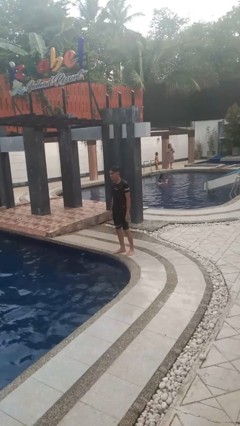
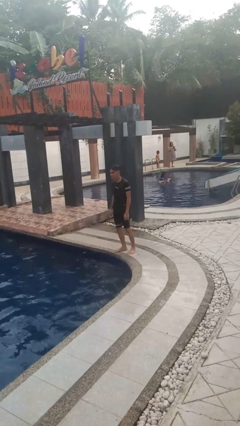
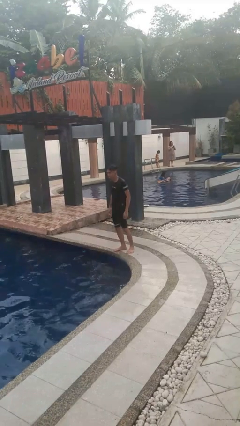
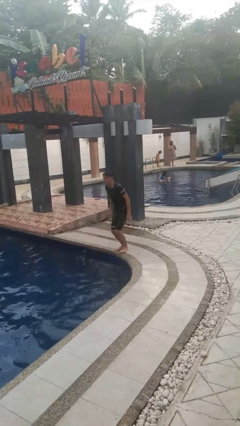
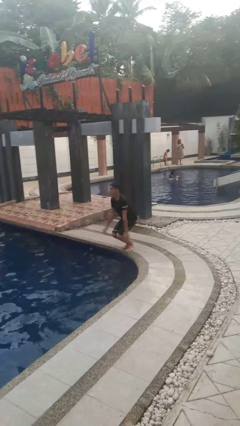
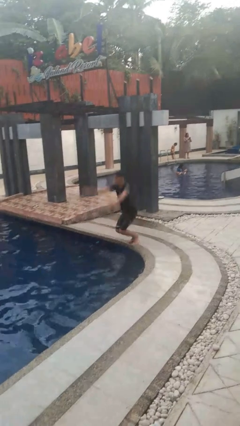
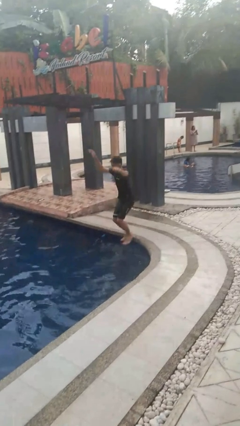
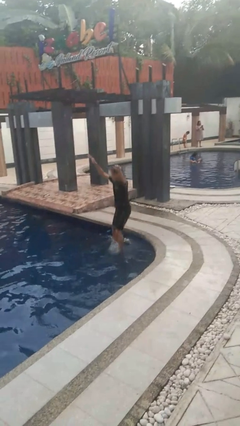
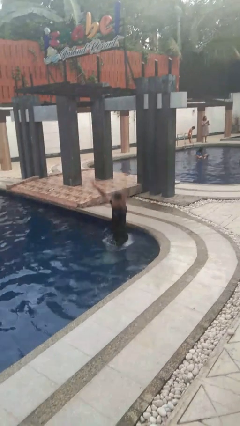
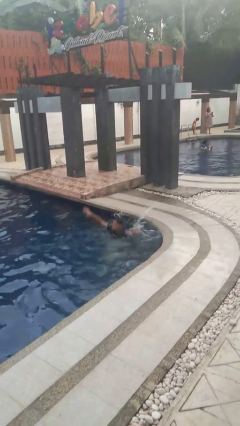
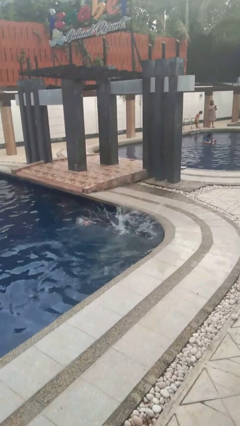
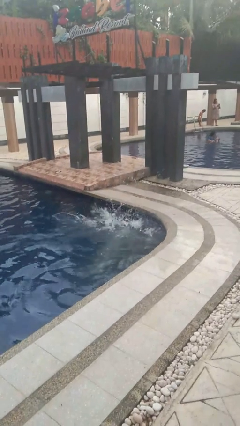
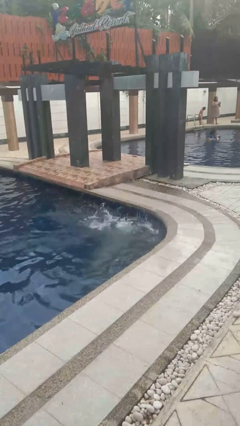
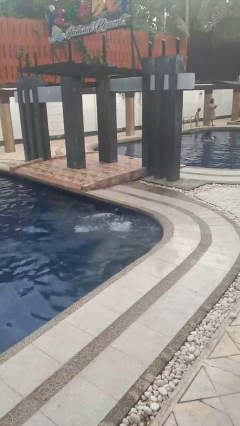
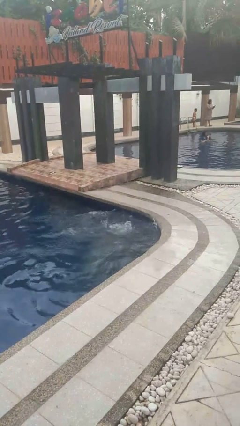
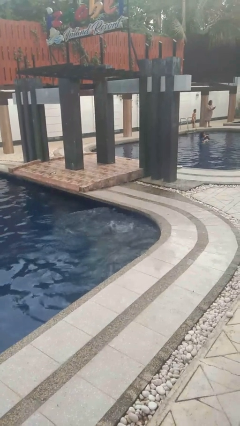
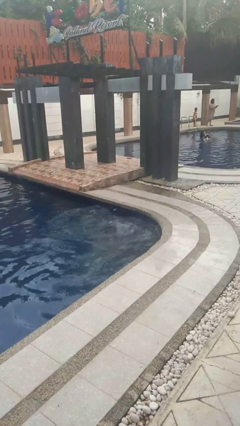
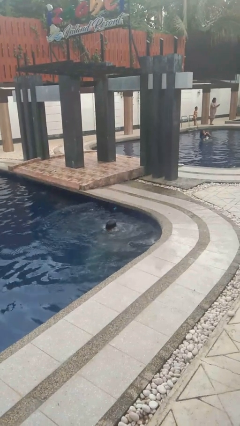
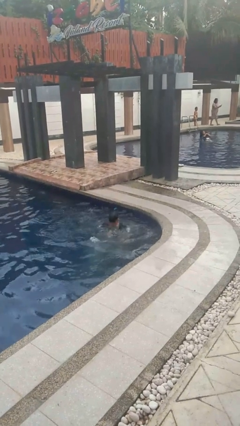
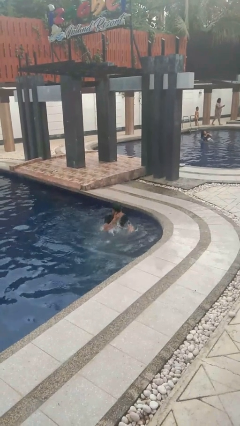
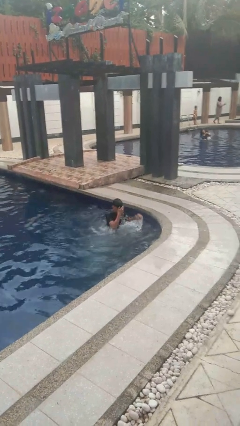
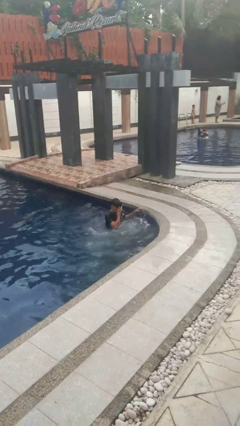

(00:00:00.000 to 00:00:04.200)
person jumps into pool

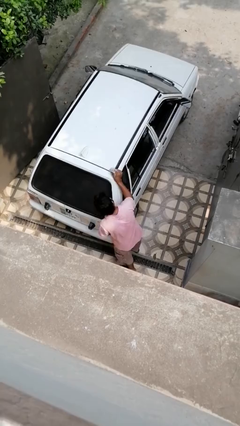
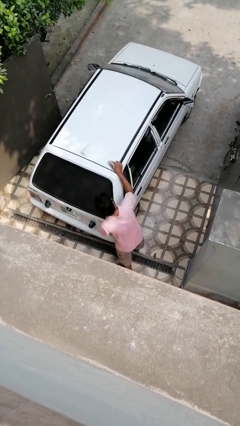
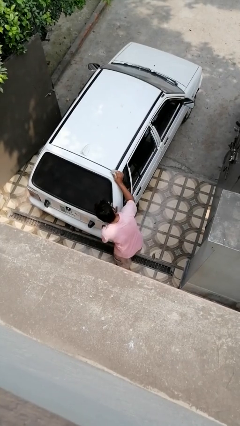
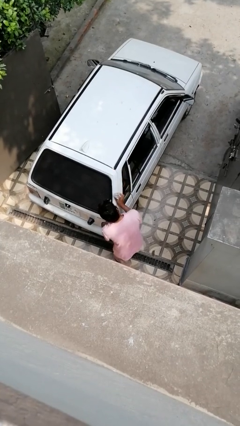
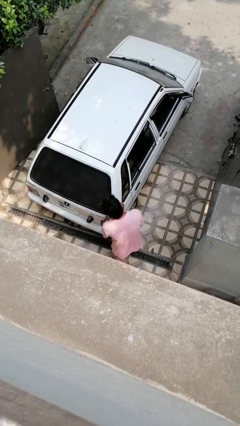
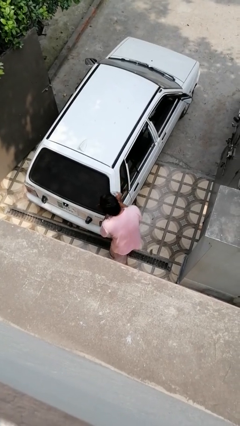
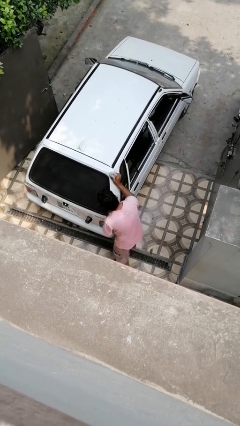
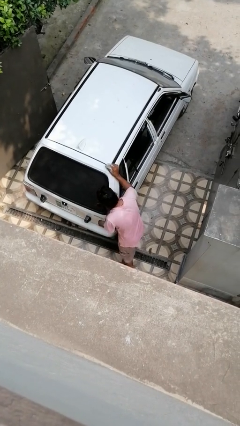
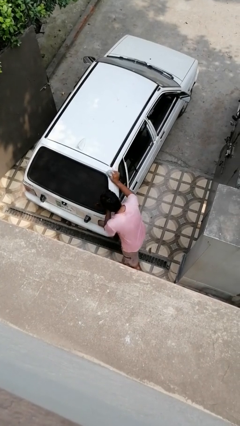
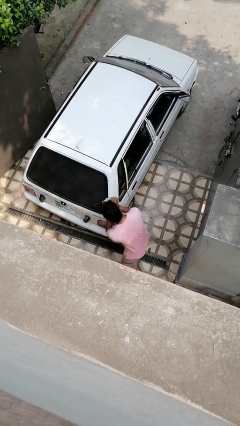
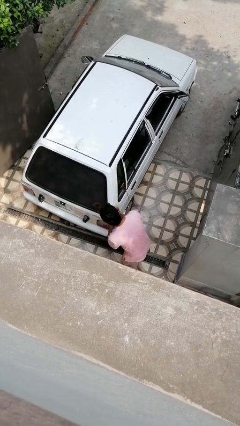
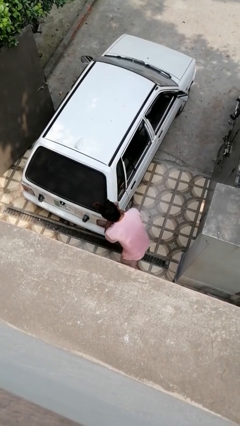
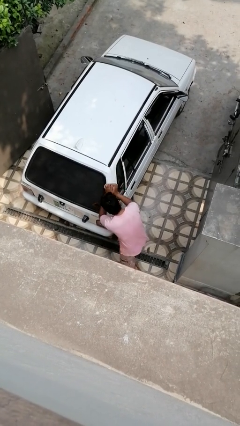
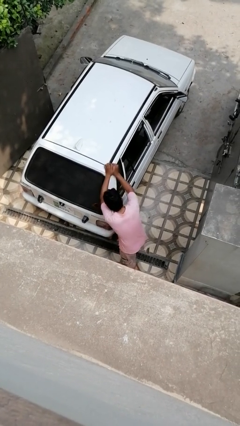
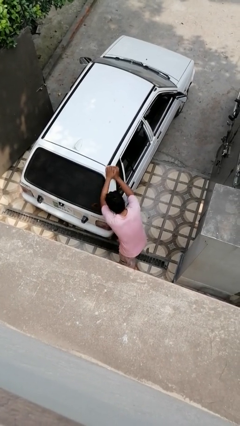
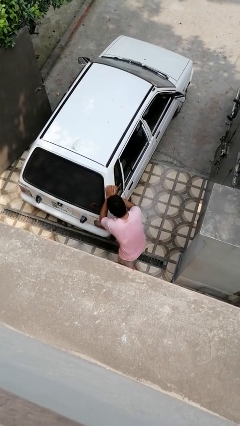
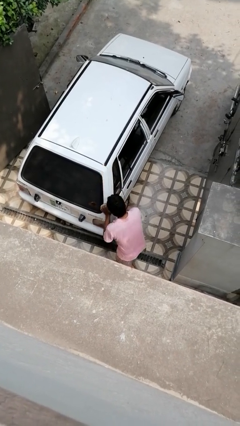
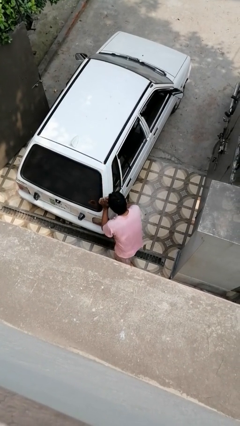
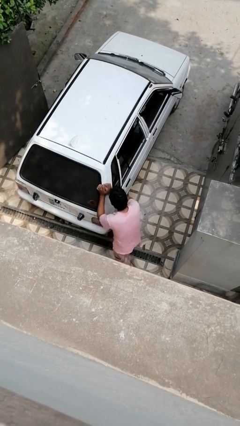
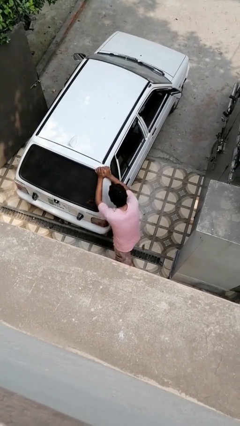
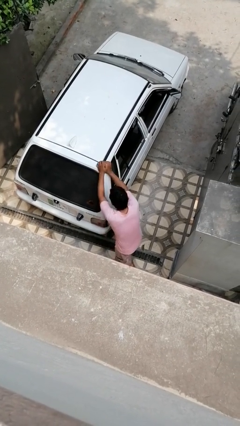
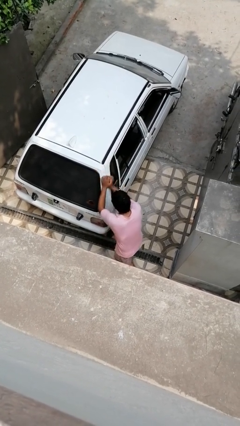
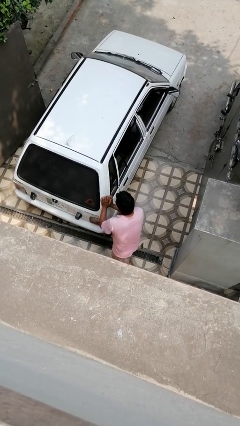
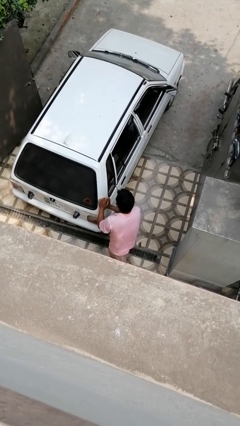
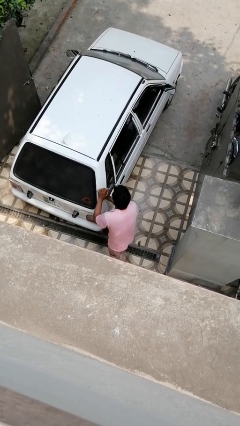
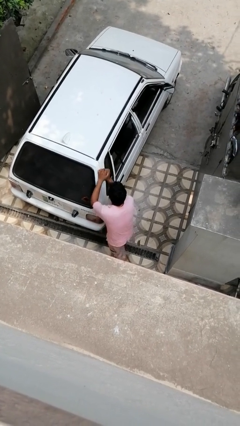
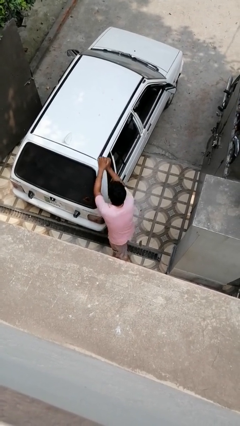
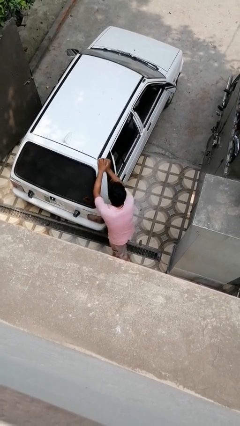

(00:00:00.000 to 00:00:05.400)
person polishes car with rag

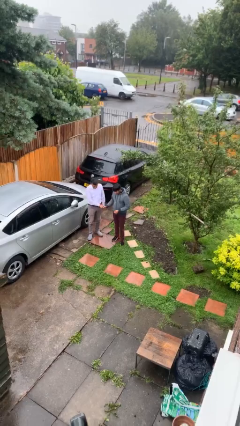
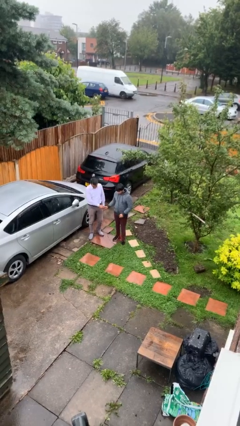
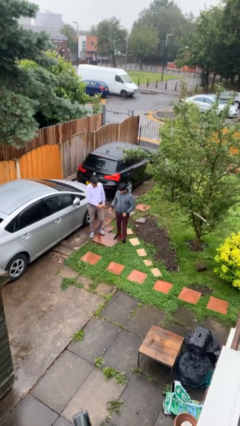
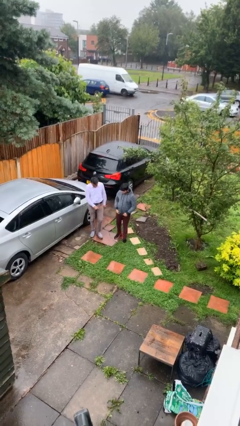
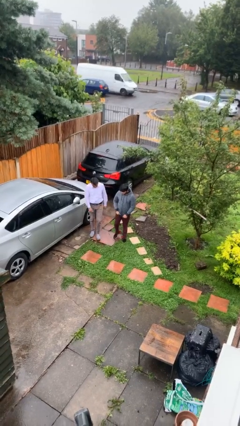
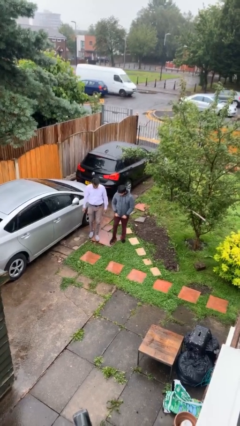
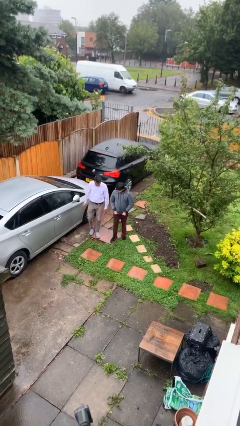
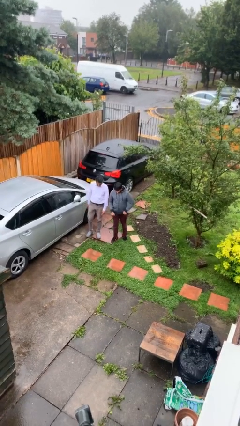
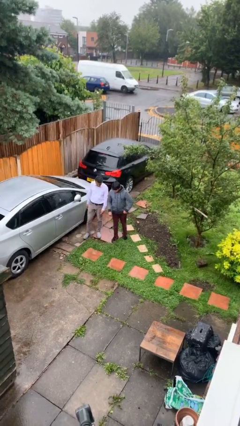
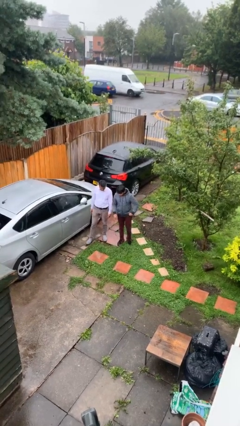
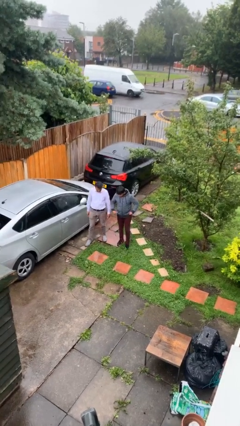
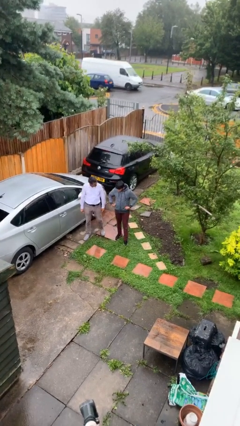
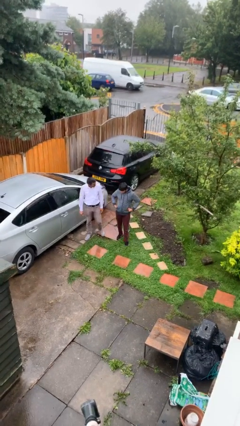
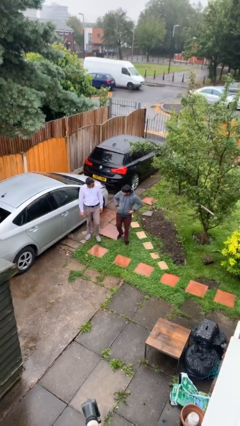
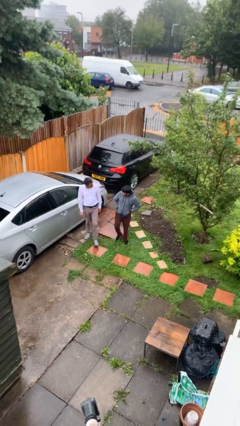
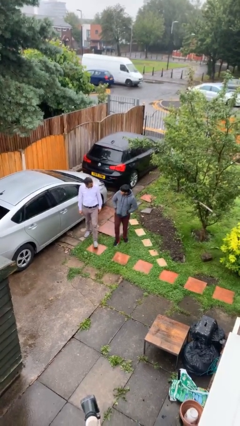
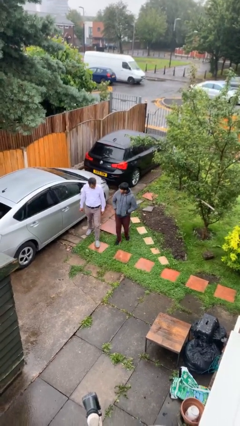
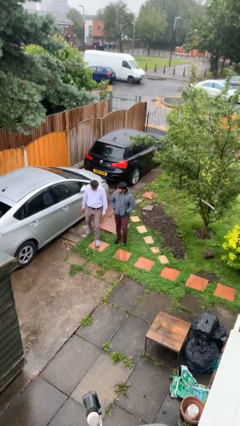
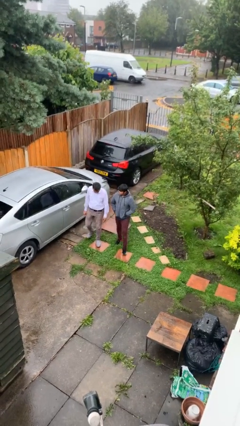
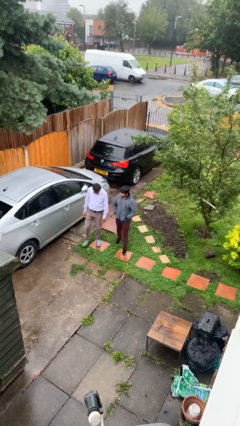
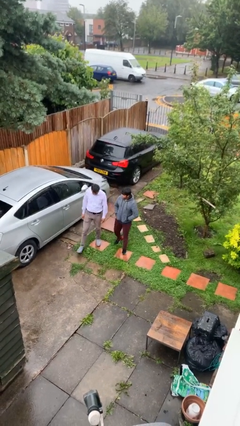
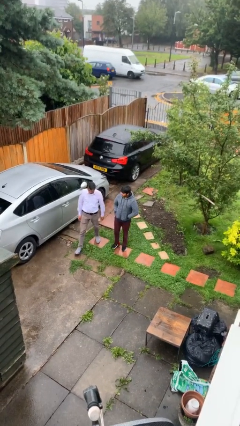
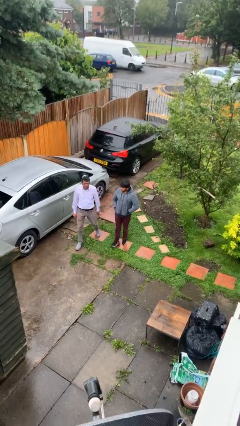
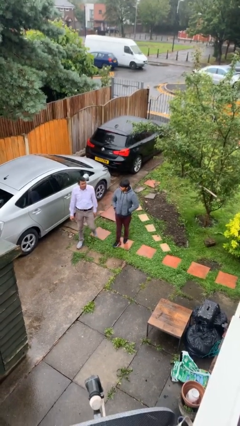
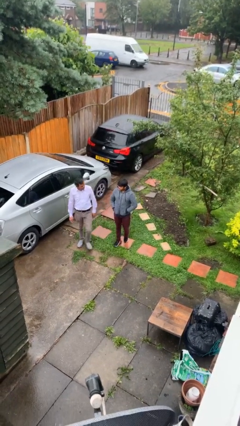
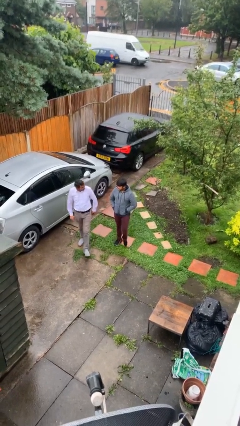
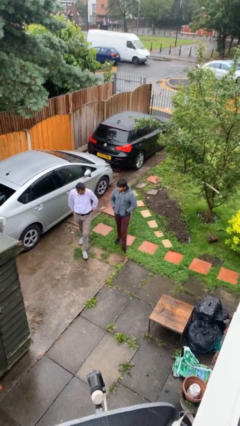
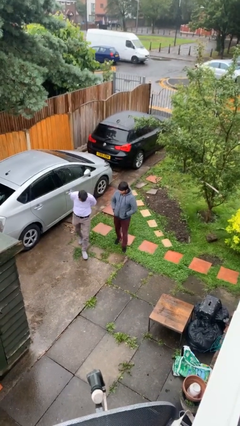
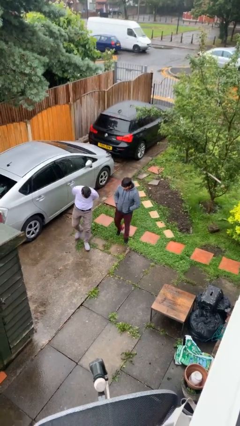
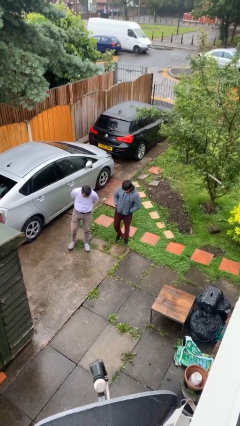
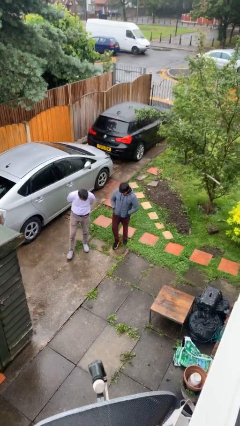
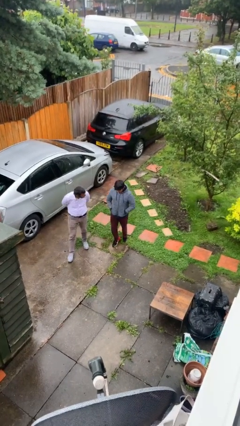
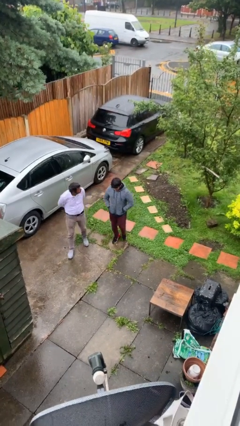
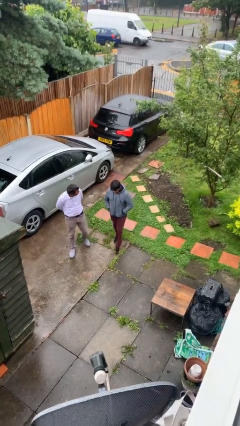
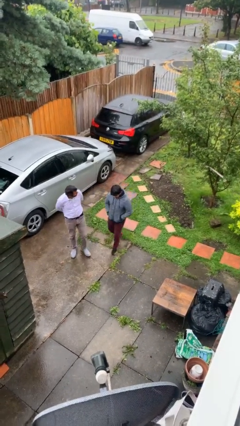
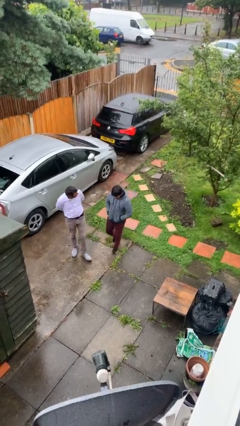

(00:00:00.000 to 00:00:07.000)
person talks to person

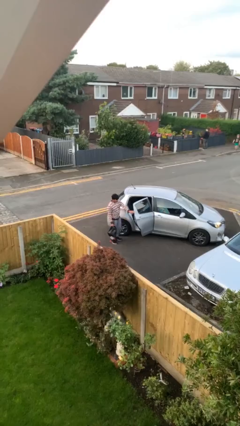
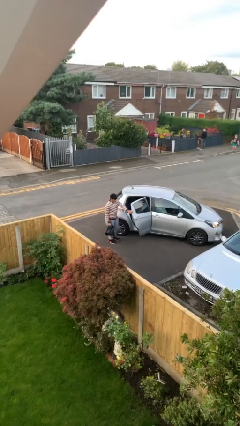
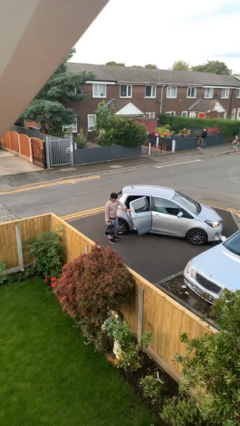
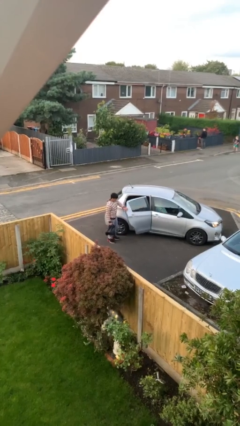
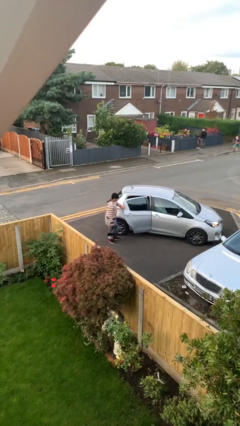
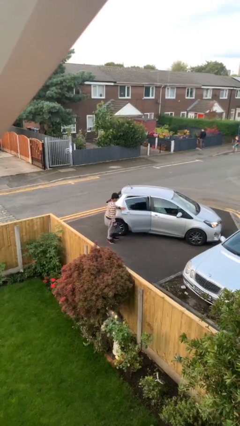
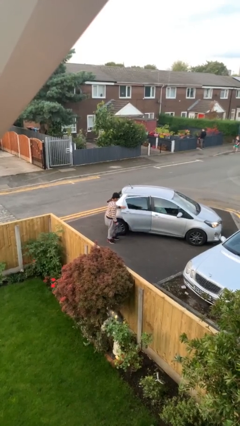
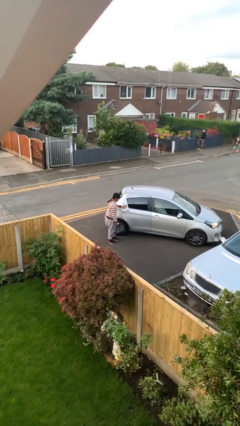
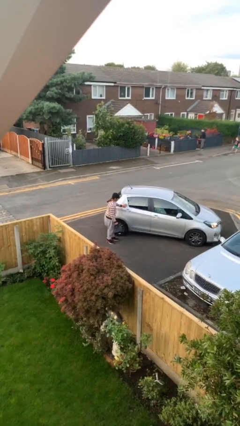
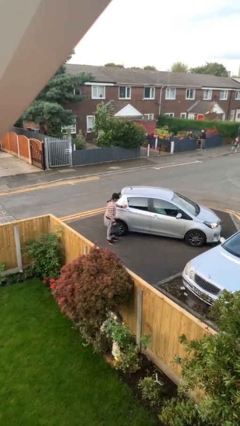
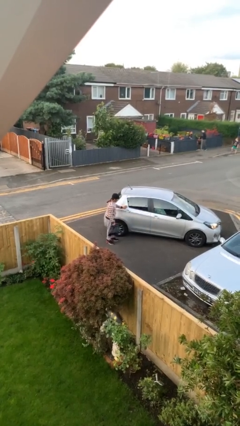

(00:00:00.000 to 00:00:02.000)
person closes car door
